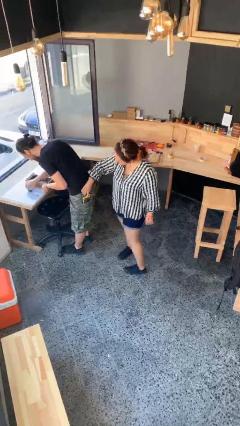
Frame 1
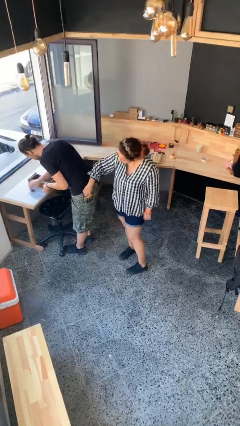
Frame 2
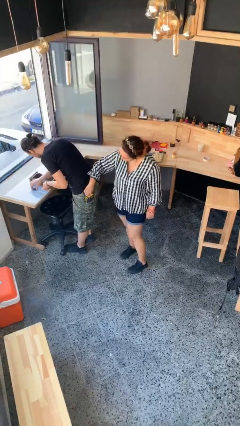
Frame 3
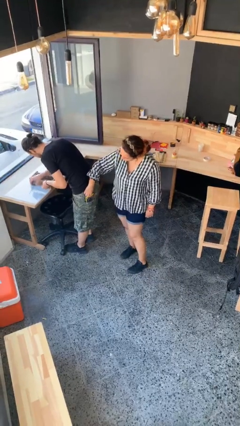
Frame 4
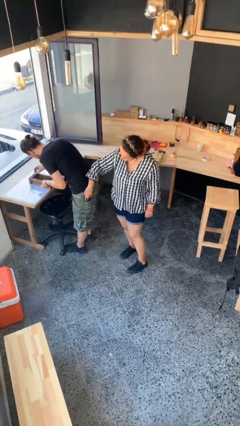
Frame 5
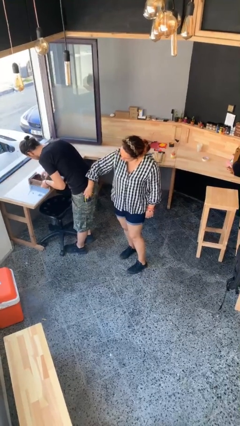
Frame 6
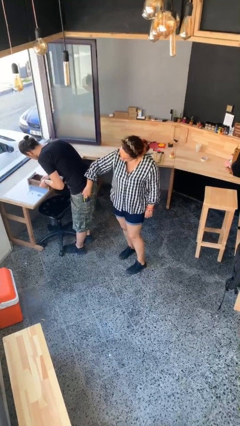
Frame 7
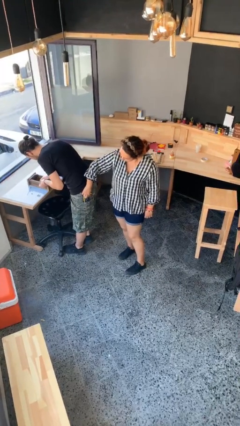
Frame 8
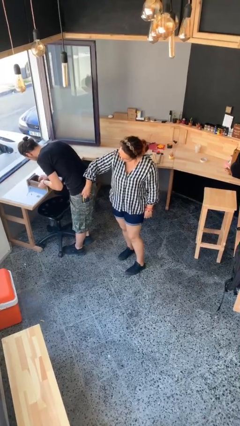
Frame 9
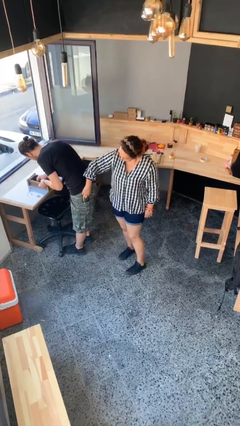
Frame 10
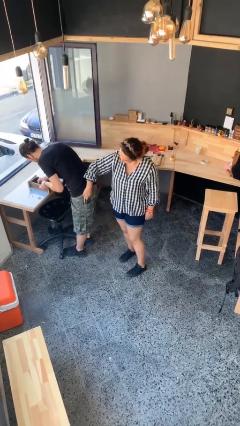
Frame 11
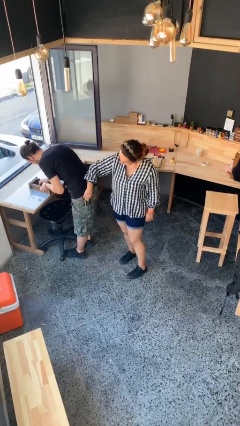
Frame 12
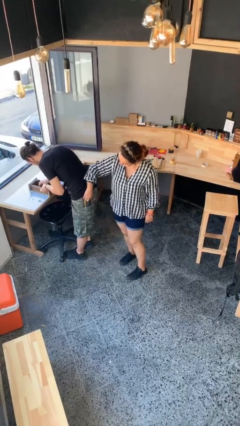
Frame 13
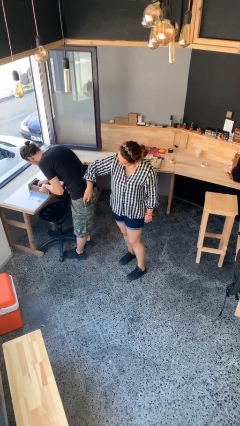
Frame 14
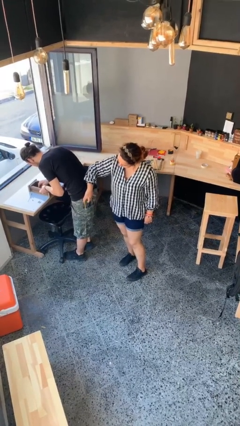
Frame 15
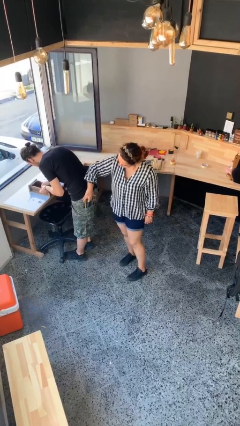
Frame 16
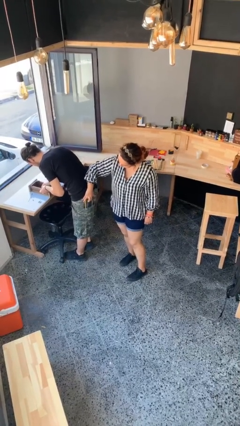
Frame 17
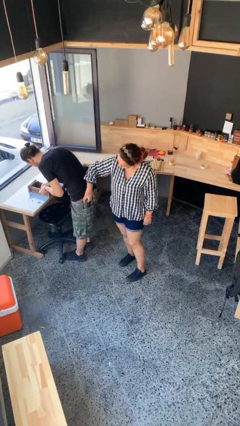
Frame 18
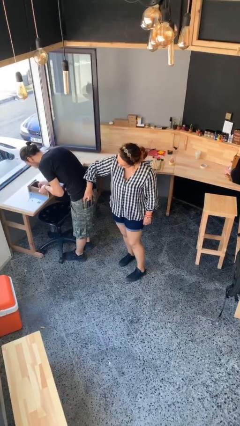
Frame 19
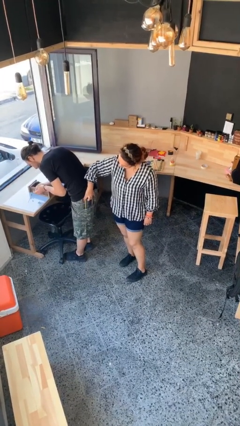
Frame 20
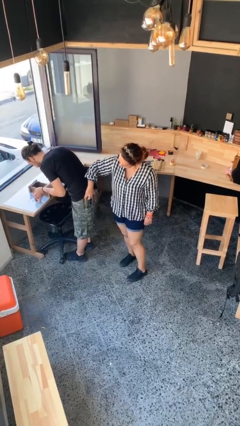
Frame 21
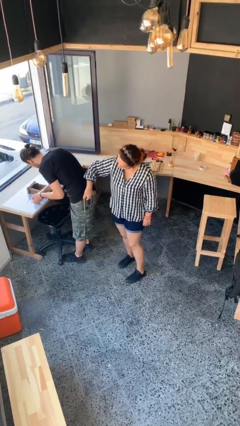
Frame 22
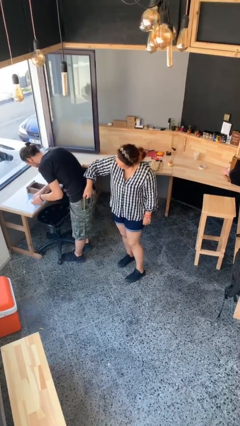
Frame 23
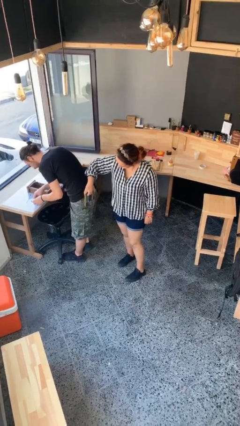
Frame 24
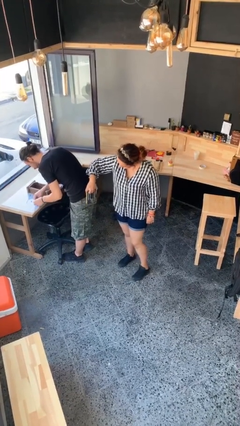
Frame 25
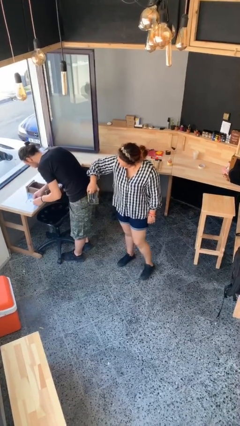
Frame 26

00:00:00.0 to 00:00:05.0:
person steals object from person

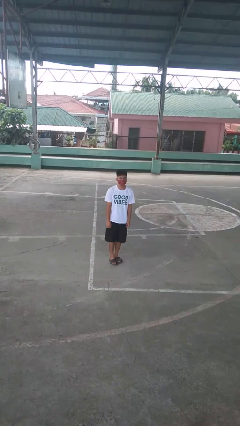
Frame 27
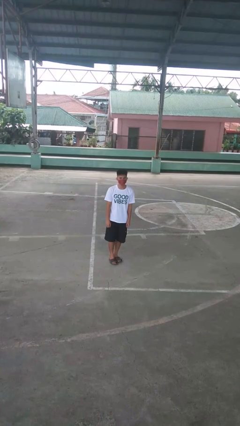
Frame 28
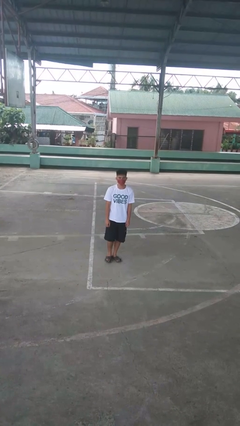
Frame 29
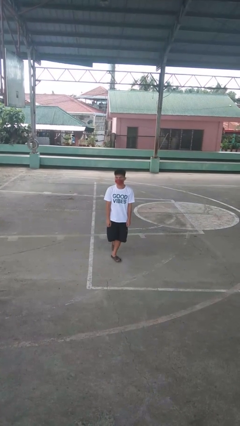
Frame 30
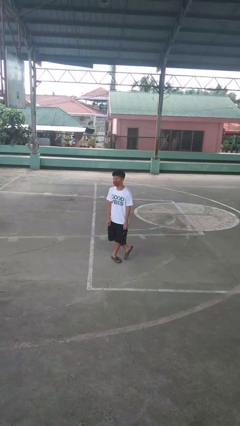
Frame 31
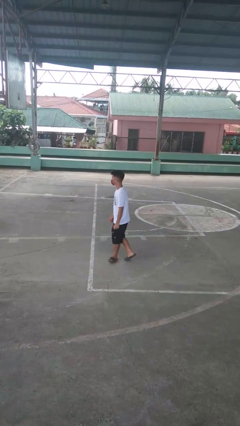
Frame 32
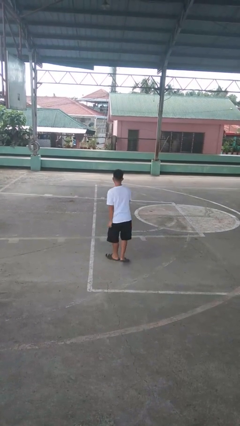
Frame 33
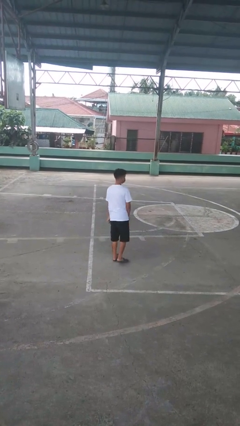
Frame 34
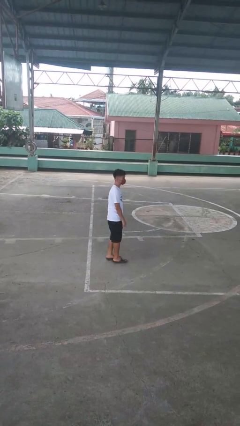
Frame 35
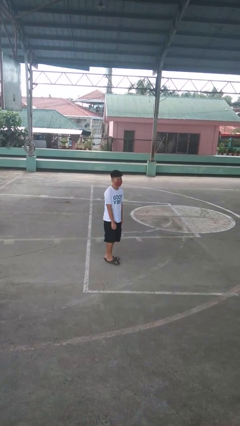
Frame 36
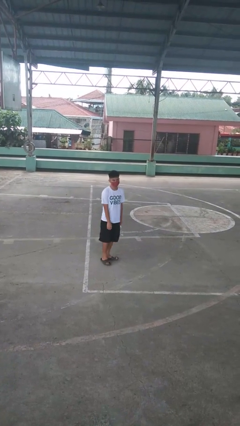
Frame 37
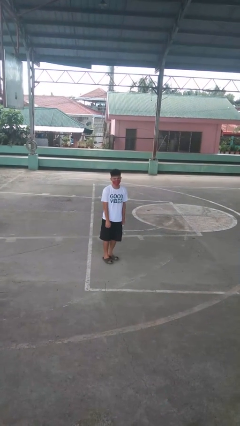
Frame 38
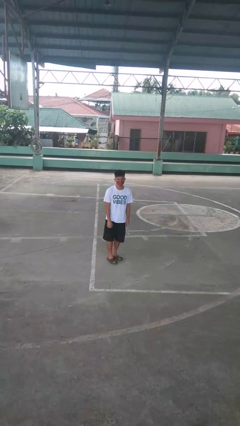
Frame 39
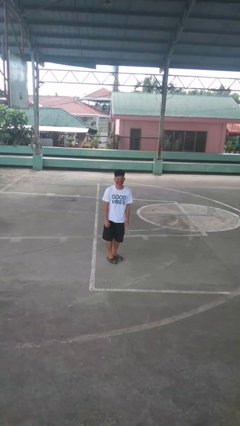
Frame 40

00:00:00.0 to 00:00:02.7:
person twirls

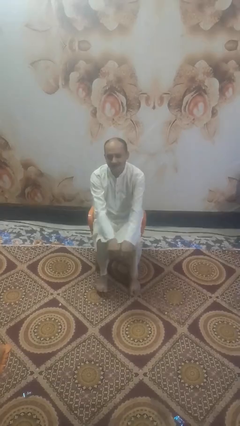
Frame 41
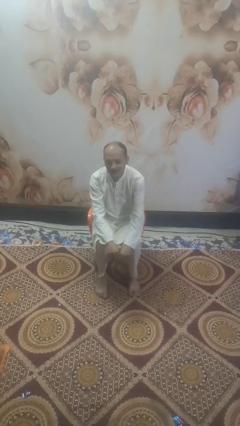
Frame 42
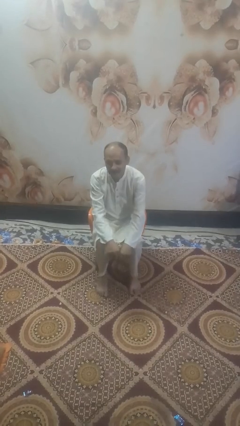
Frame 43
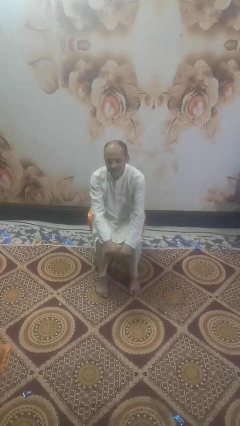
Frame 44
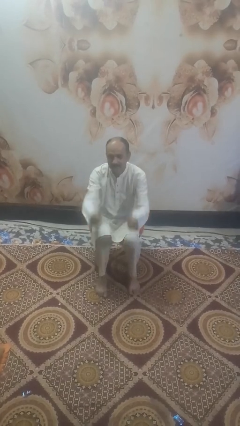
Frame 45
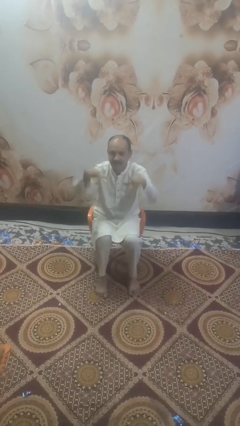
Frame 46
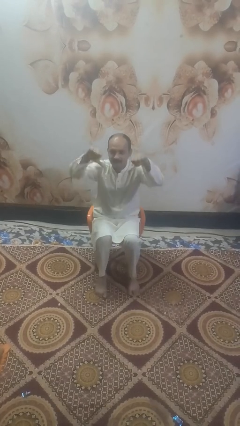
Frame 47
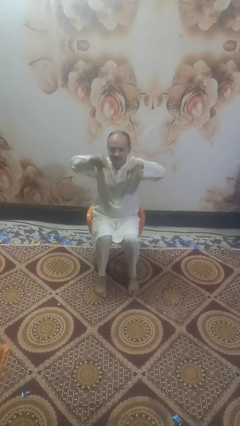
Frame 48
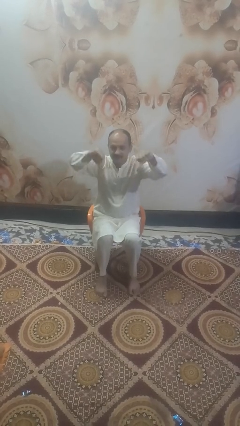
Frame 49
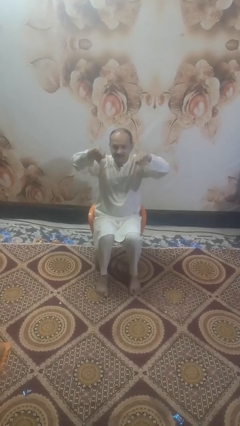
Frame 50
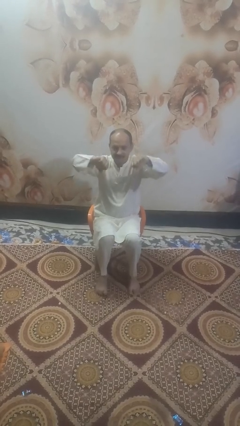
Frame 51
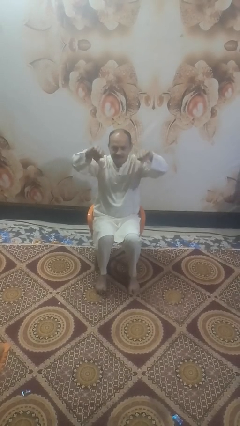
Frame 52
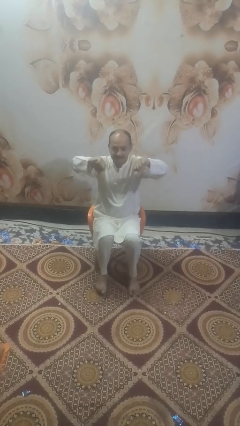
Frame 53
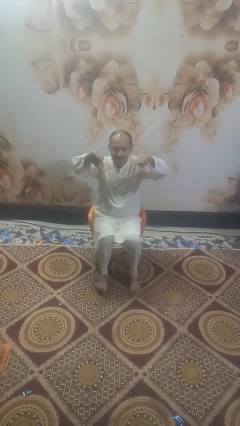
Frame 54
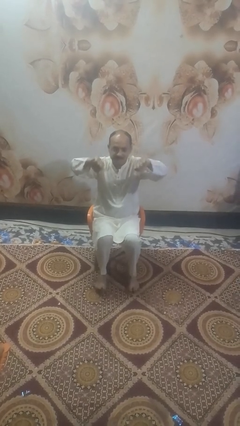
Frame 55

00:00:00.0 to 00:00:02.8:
person gestures thumbs down

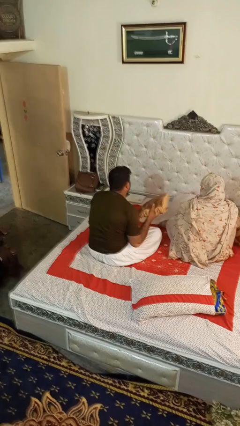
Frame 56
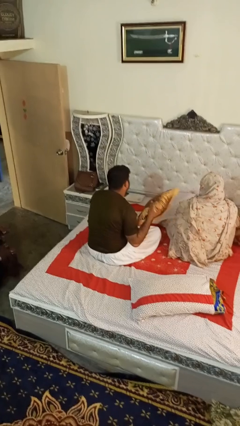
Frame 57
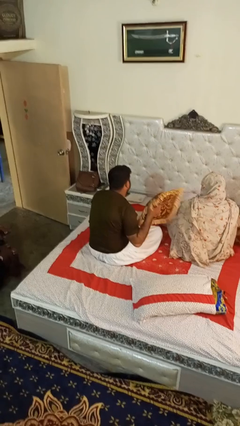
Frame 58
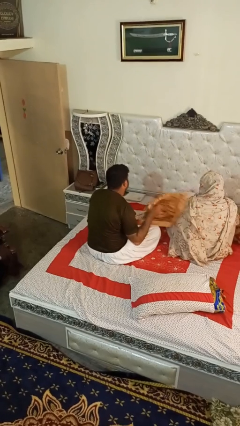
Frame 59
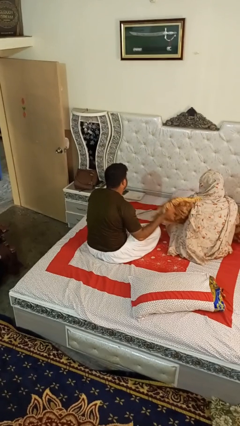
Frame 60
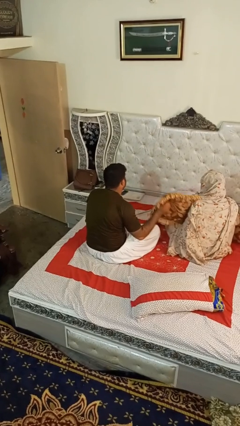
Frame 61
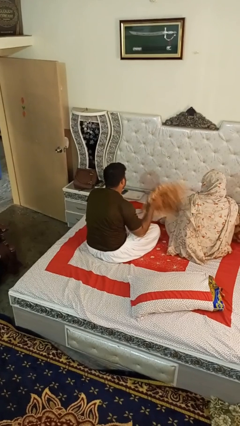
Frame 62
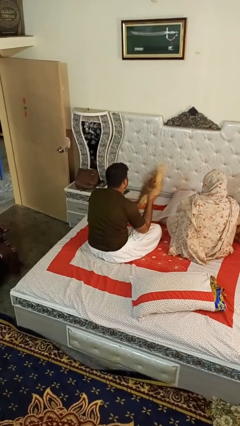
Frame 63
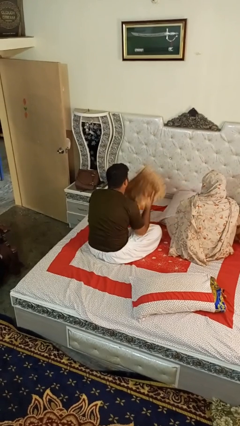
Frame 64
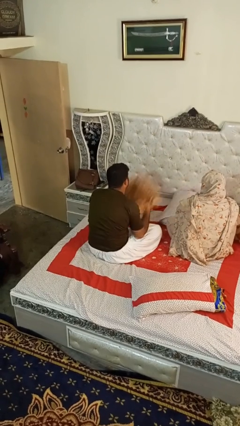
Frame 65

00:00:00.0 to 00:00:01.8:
person hits person with pillow

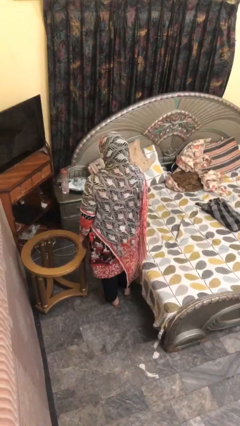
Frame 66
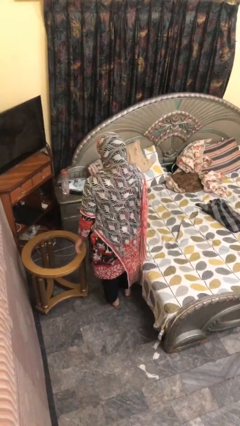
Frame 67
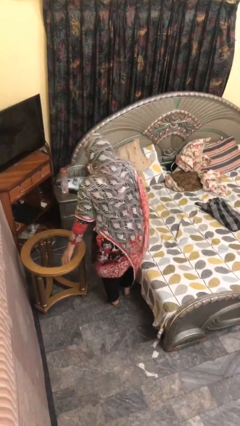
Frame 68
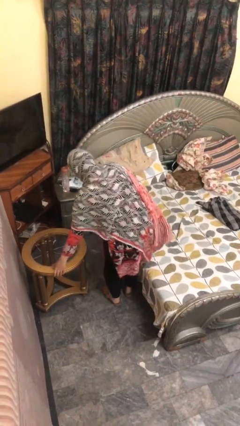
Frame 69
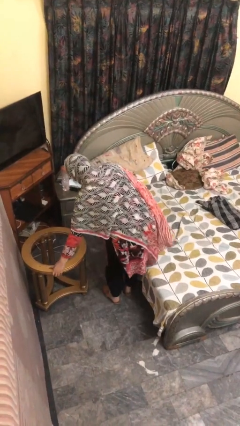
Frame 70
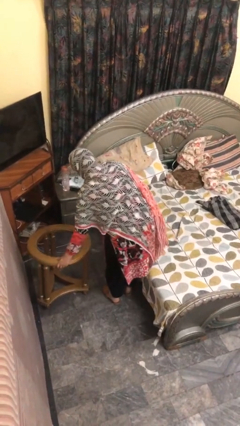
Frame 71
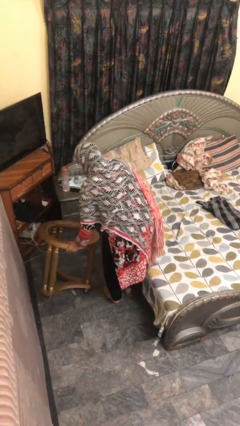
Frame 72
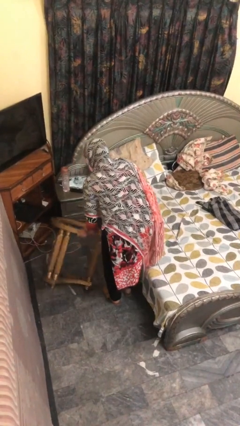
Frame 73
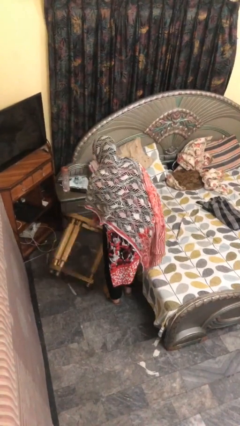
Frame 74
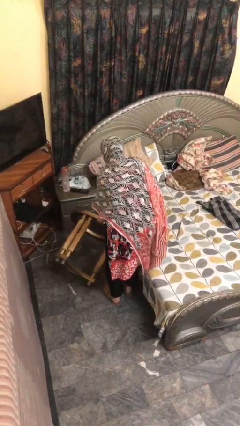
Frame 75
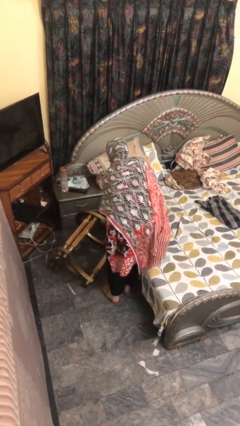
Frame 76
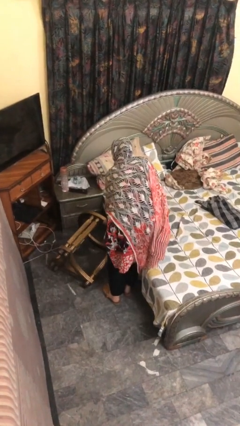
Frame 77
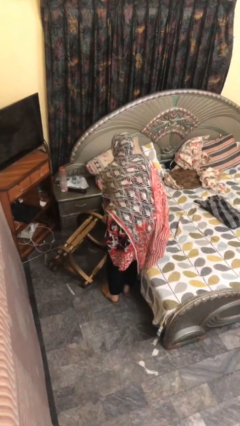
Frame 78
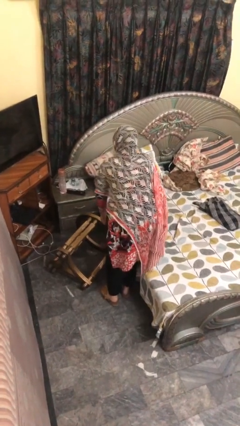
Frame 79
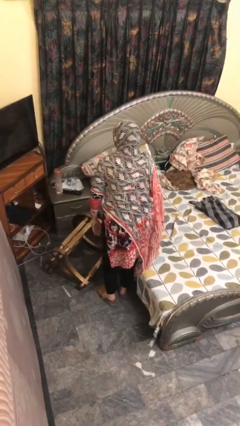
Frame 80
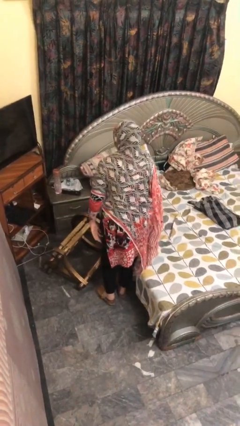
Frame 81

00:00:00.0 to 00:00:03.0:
person knocks over furniture

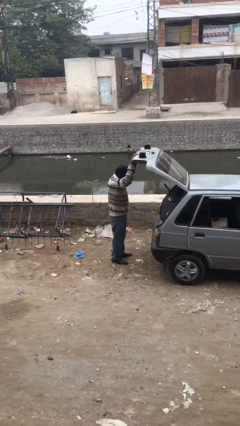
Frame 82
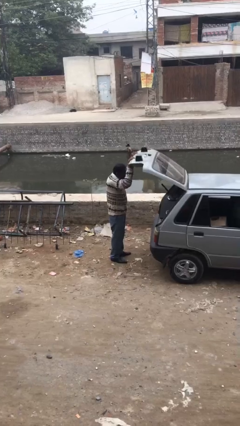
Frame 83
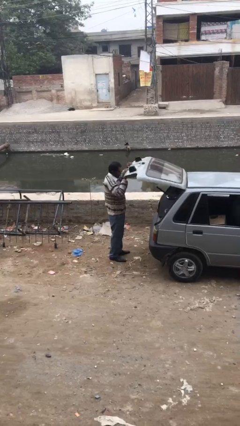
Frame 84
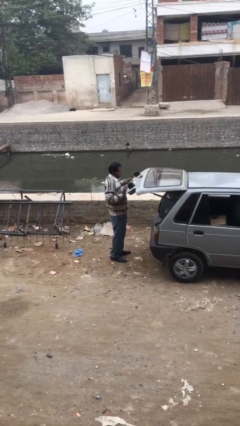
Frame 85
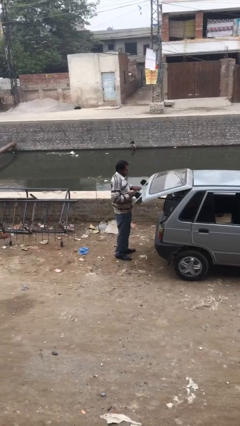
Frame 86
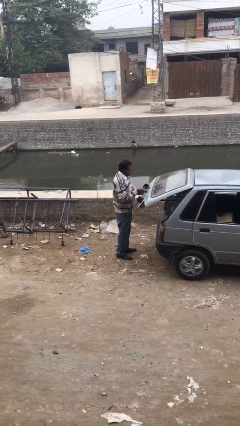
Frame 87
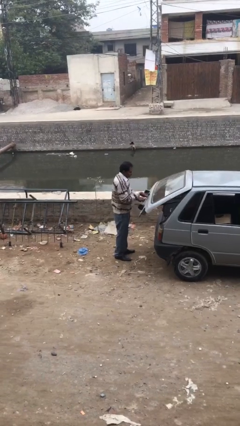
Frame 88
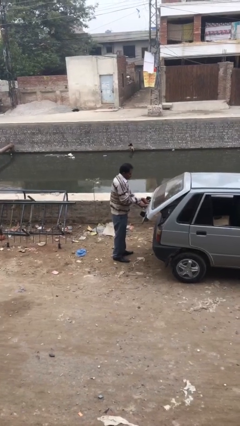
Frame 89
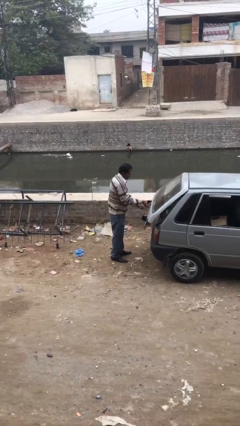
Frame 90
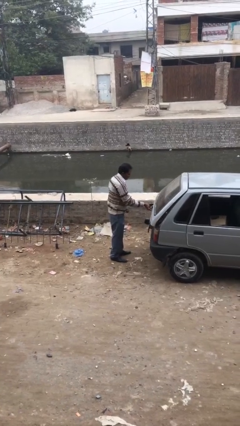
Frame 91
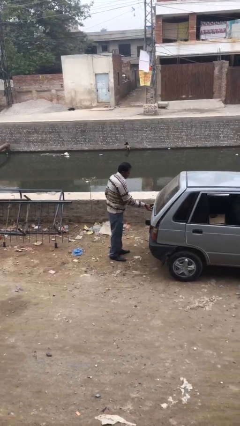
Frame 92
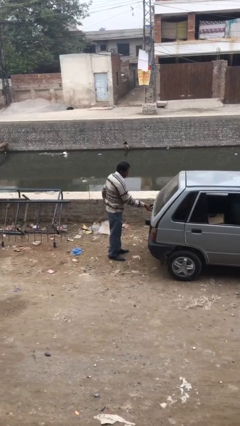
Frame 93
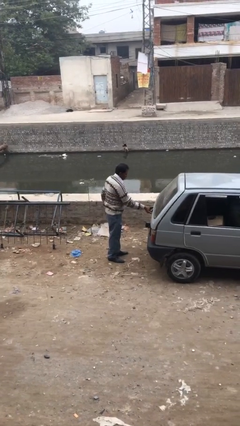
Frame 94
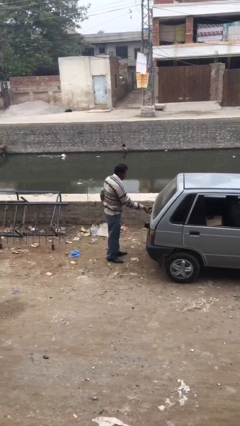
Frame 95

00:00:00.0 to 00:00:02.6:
person closes car trunk
